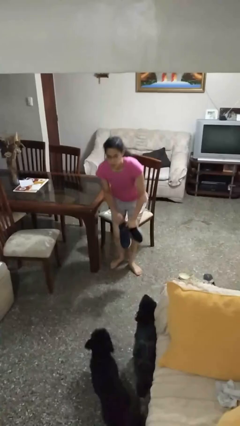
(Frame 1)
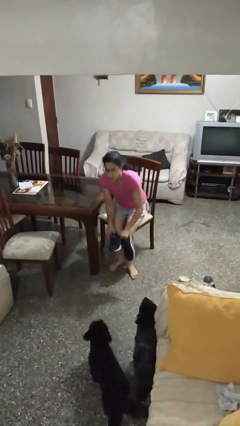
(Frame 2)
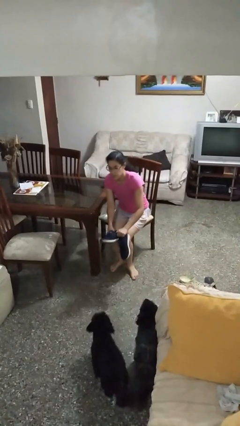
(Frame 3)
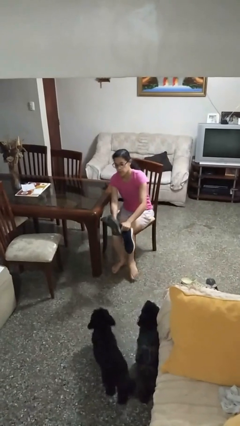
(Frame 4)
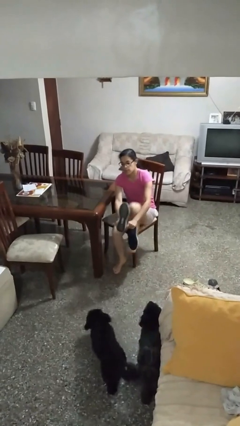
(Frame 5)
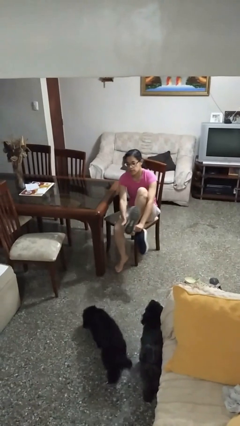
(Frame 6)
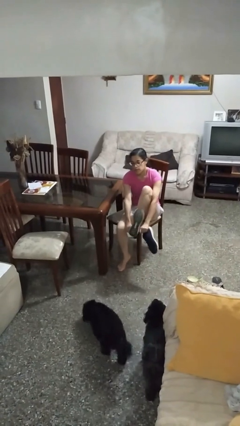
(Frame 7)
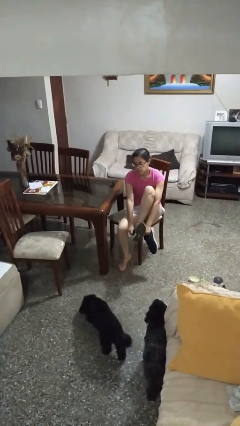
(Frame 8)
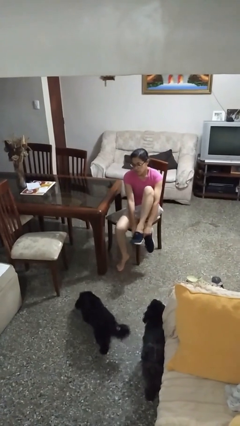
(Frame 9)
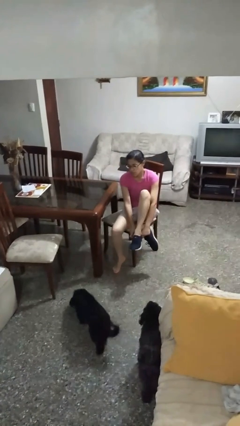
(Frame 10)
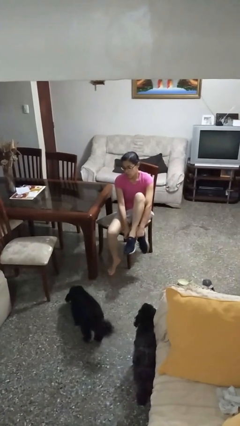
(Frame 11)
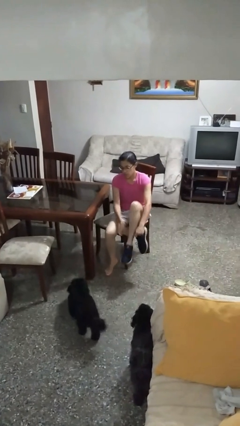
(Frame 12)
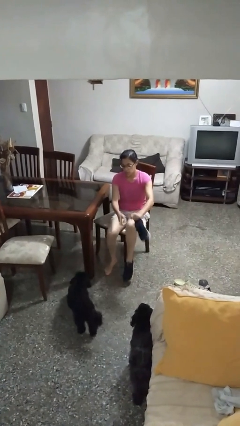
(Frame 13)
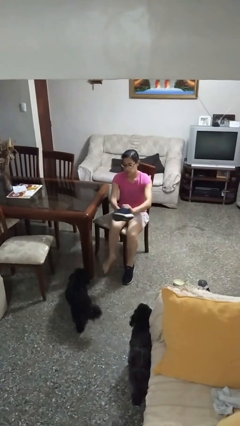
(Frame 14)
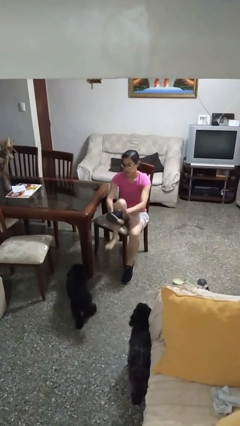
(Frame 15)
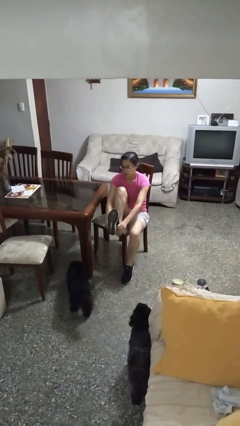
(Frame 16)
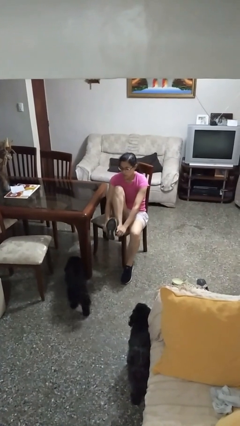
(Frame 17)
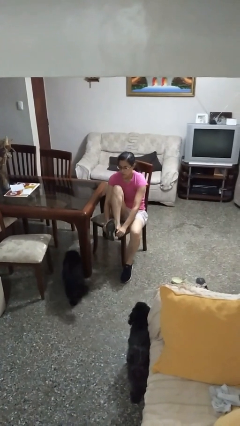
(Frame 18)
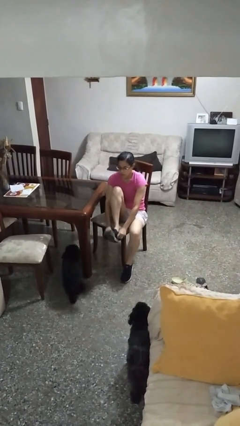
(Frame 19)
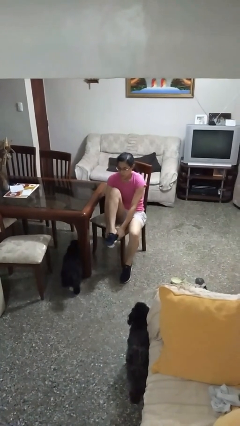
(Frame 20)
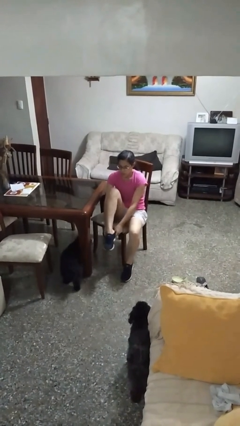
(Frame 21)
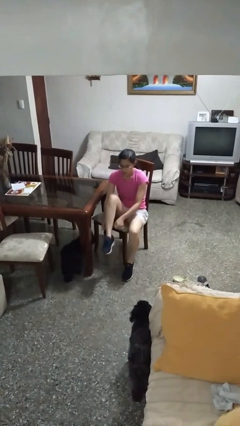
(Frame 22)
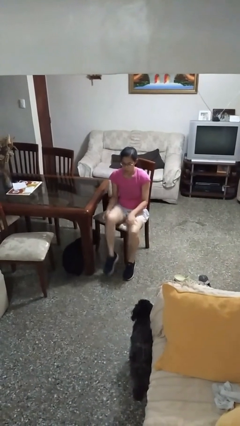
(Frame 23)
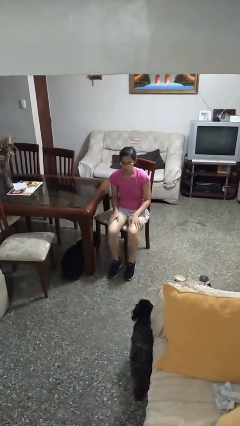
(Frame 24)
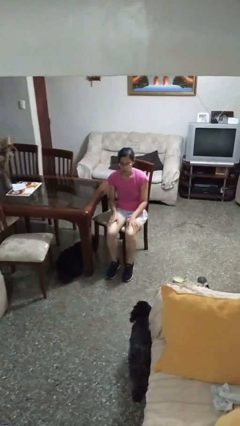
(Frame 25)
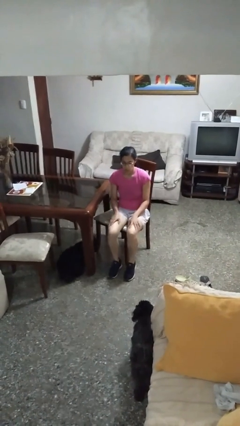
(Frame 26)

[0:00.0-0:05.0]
person puts on shoes

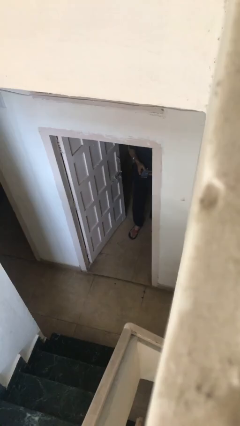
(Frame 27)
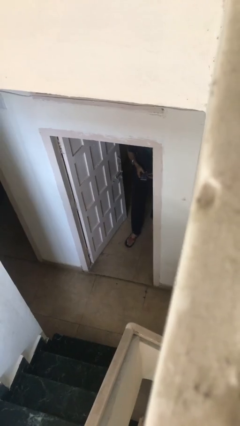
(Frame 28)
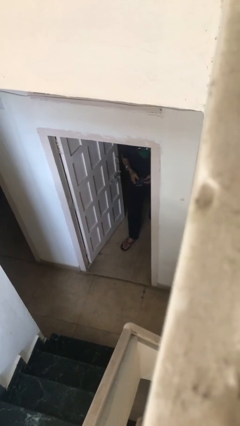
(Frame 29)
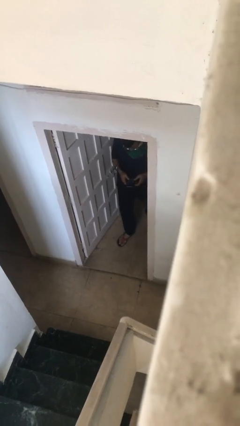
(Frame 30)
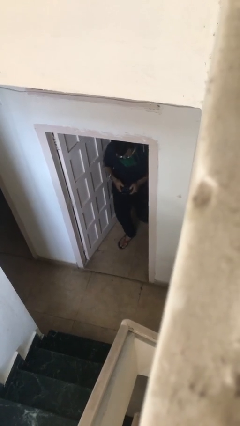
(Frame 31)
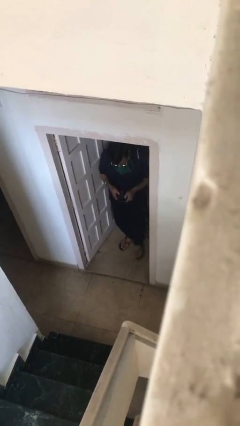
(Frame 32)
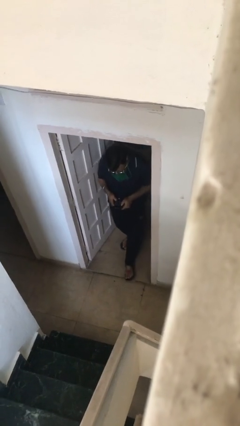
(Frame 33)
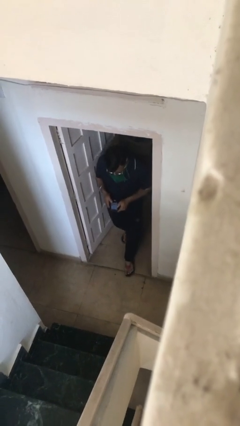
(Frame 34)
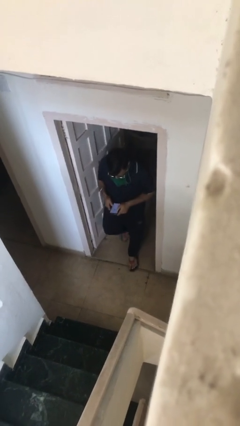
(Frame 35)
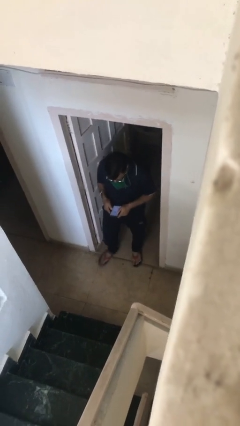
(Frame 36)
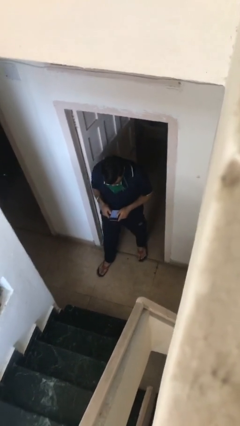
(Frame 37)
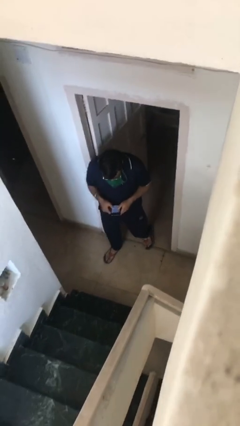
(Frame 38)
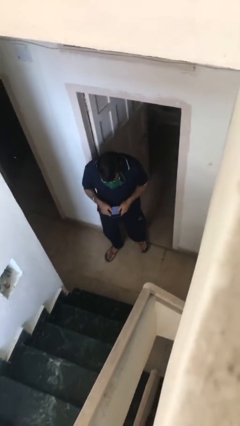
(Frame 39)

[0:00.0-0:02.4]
person enters scene through structure

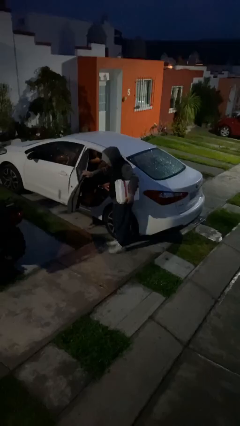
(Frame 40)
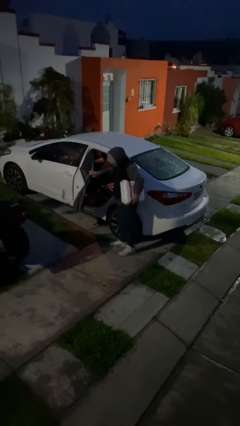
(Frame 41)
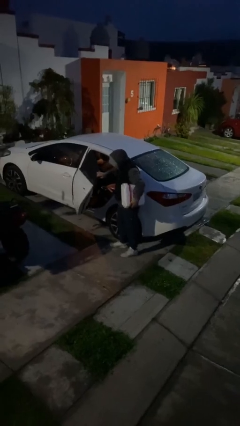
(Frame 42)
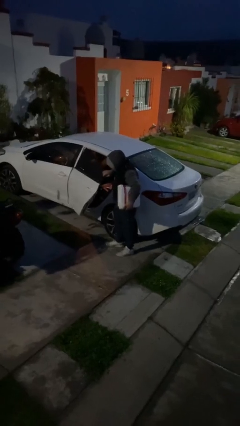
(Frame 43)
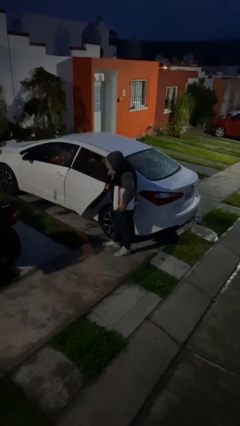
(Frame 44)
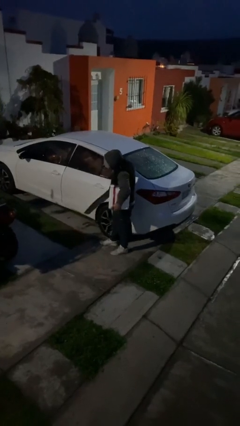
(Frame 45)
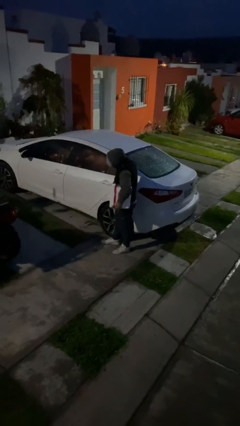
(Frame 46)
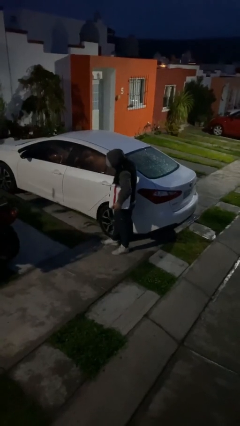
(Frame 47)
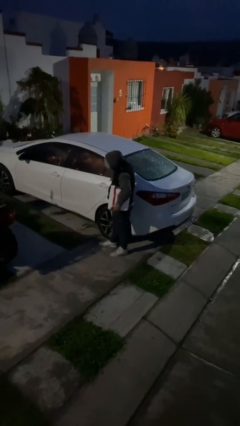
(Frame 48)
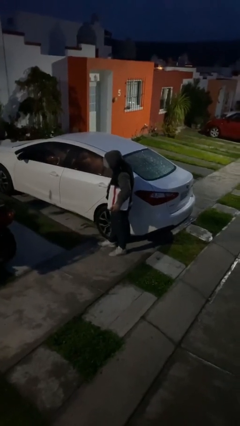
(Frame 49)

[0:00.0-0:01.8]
person closes car door

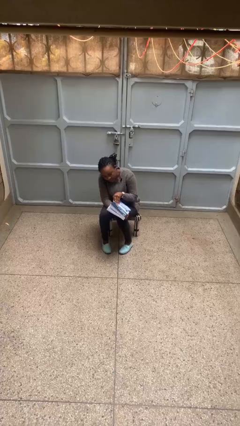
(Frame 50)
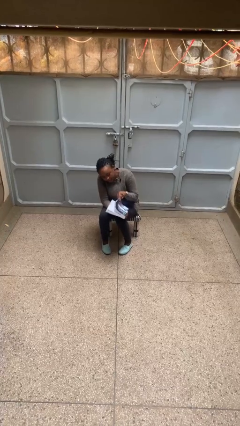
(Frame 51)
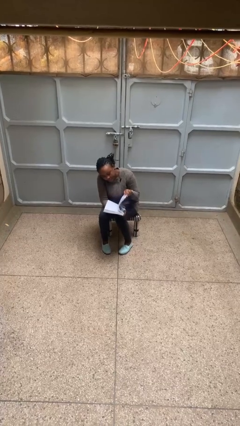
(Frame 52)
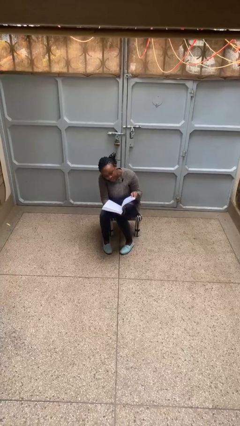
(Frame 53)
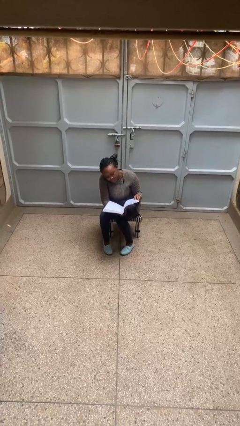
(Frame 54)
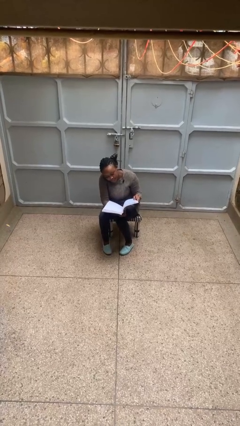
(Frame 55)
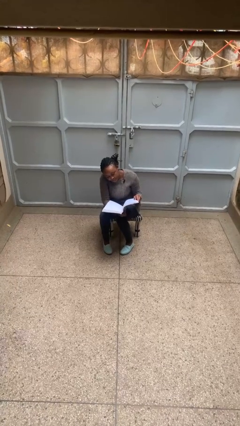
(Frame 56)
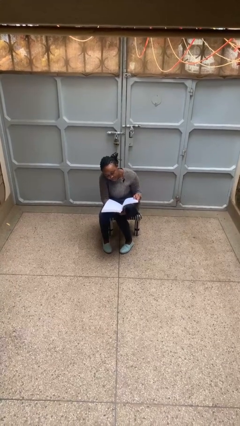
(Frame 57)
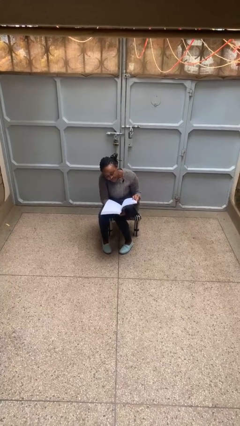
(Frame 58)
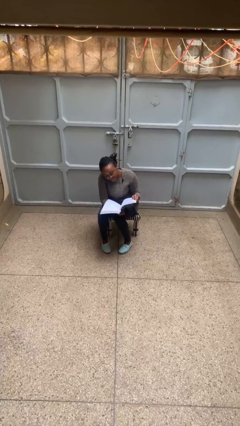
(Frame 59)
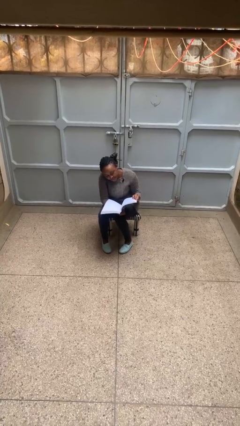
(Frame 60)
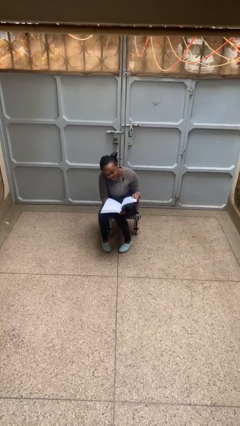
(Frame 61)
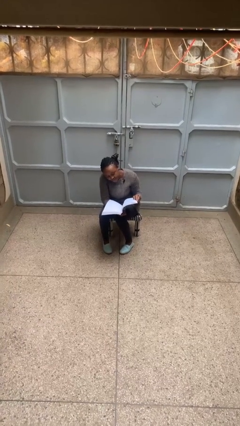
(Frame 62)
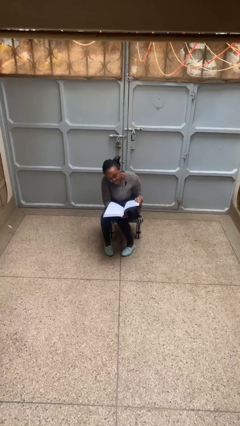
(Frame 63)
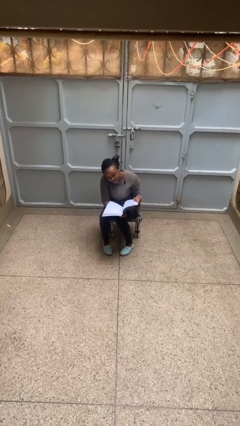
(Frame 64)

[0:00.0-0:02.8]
person reads book

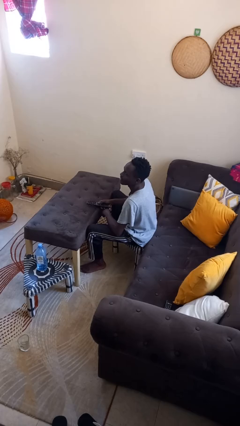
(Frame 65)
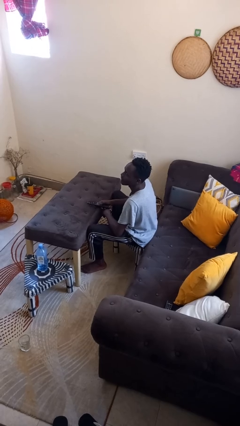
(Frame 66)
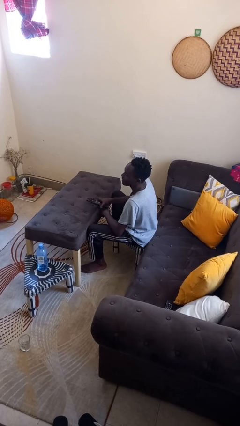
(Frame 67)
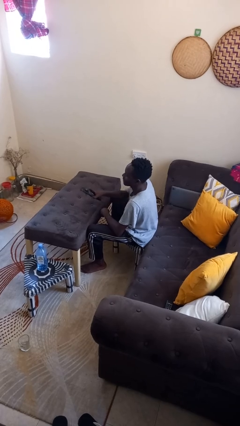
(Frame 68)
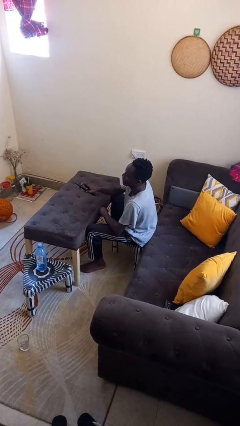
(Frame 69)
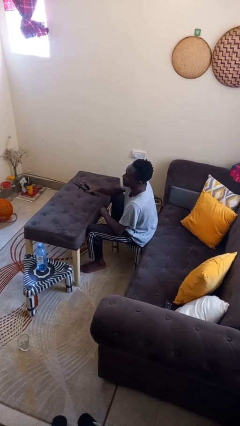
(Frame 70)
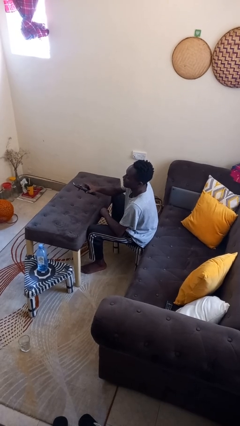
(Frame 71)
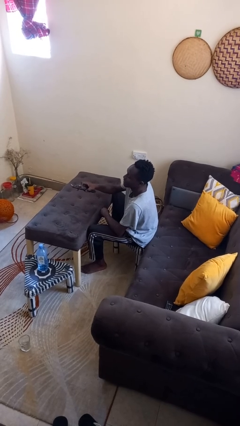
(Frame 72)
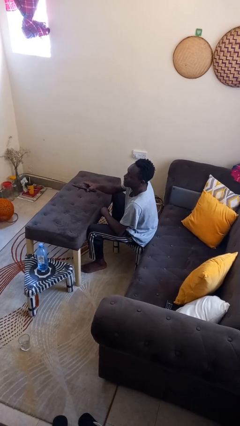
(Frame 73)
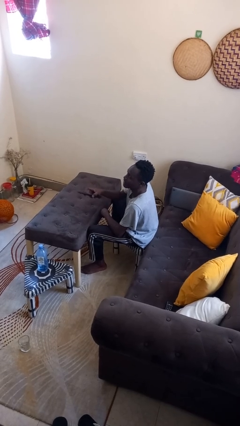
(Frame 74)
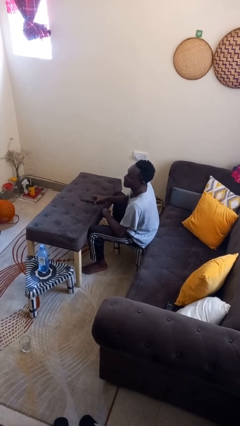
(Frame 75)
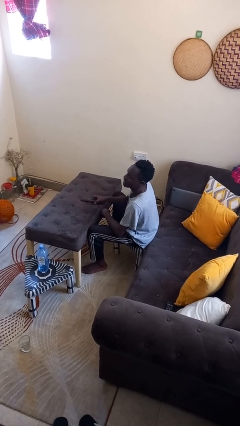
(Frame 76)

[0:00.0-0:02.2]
person uses television remote

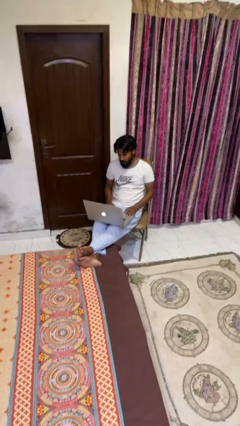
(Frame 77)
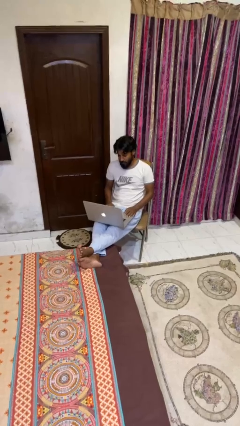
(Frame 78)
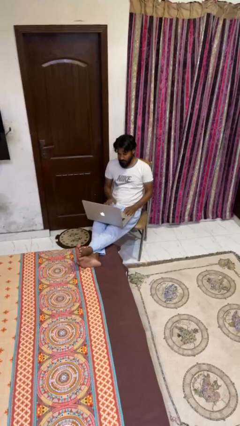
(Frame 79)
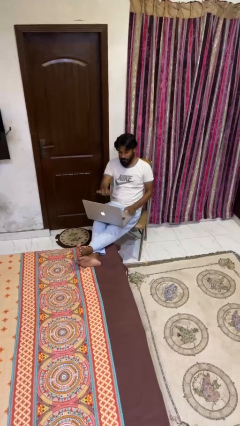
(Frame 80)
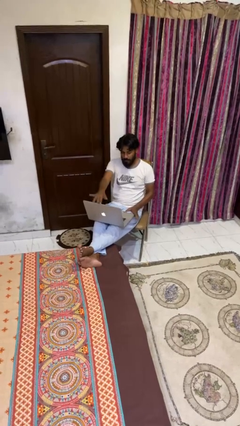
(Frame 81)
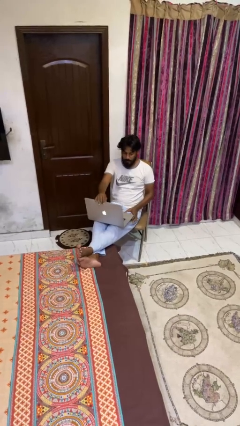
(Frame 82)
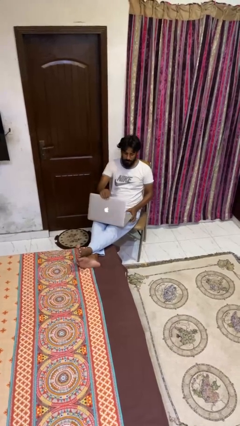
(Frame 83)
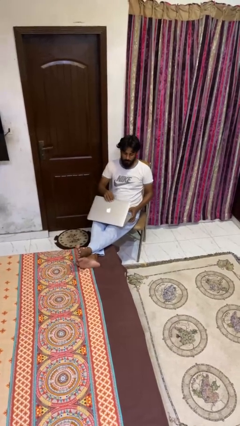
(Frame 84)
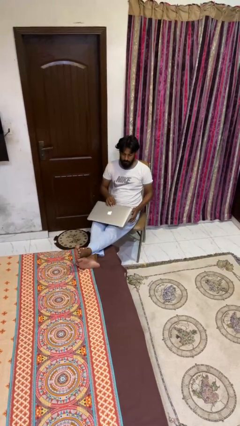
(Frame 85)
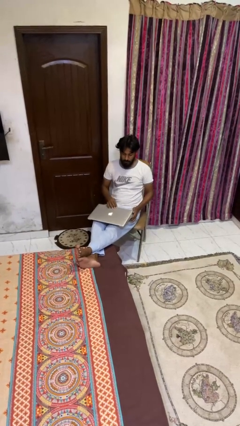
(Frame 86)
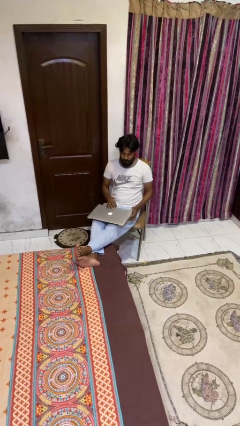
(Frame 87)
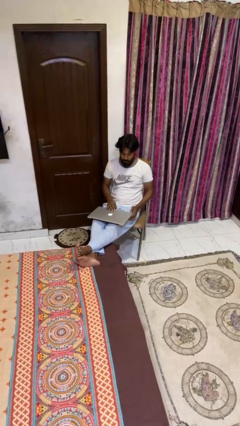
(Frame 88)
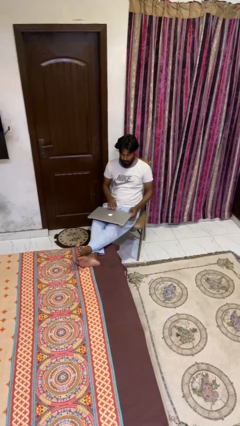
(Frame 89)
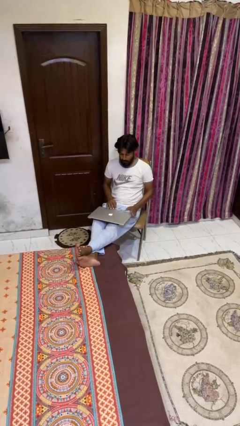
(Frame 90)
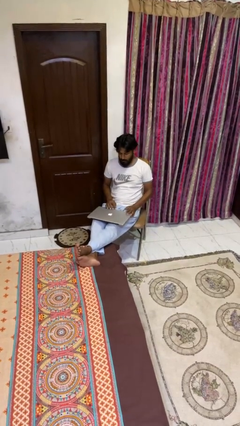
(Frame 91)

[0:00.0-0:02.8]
person closes laptop

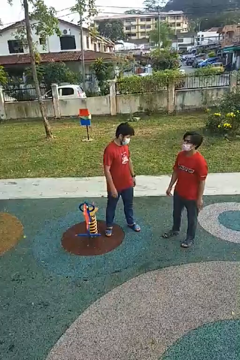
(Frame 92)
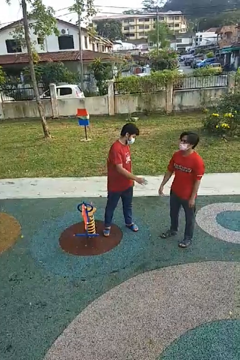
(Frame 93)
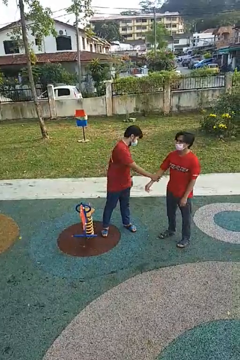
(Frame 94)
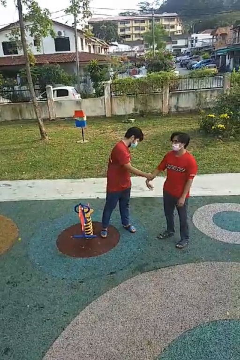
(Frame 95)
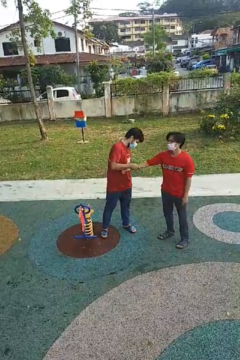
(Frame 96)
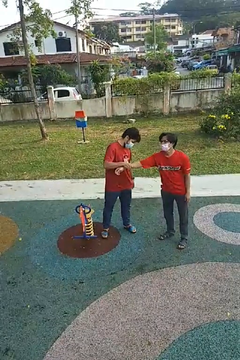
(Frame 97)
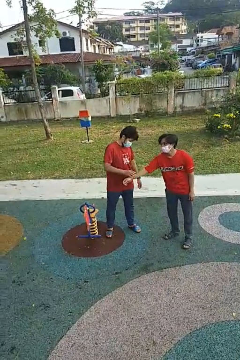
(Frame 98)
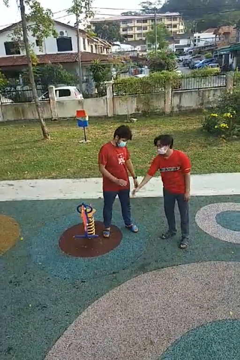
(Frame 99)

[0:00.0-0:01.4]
person grabs person by forearm
